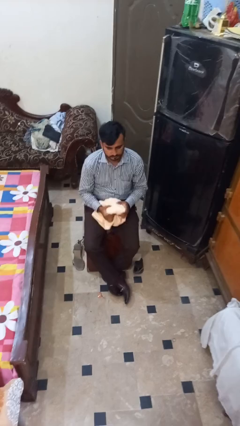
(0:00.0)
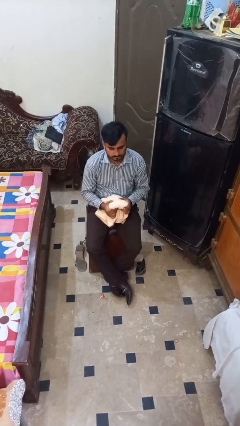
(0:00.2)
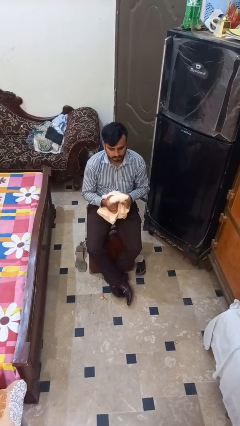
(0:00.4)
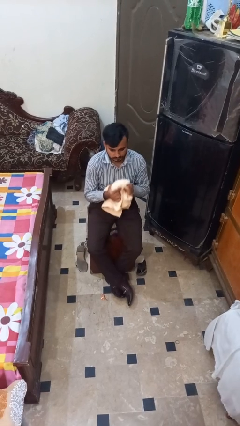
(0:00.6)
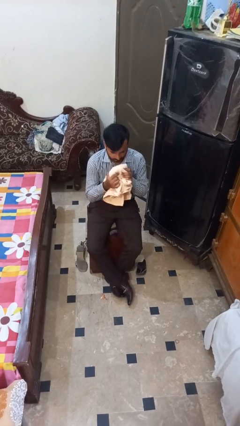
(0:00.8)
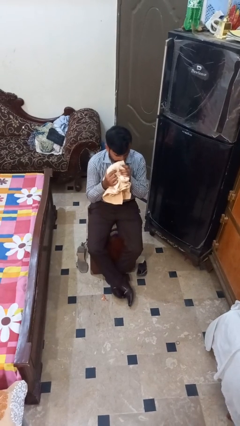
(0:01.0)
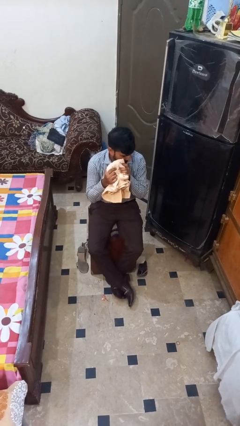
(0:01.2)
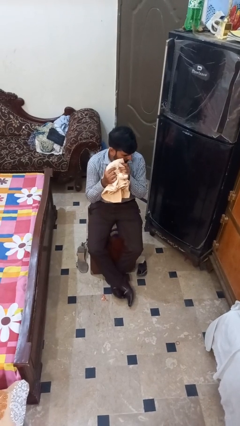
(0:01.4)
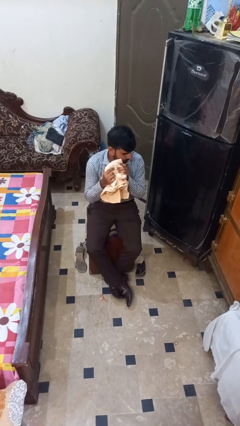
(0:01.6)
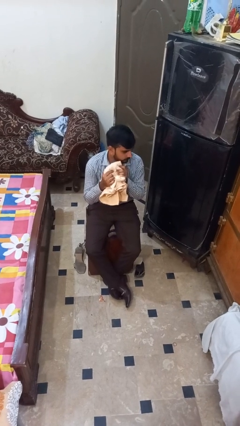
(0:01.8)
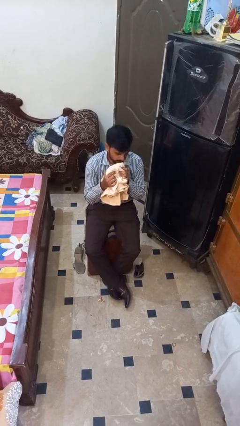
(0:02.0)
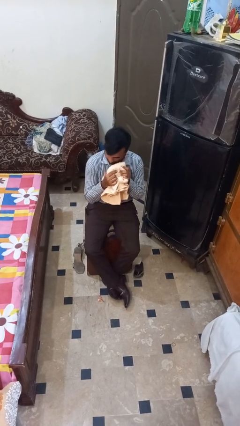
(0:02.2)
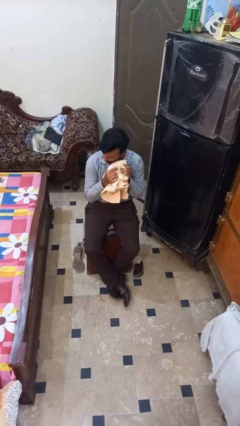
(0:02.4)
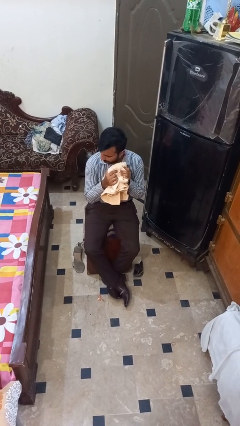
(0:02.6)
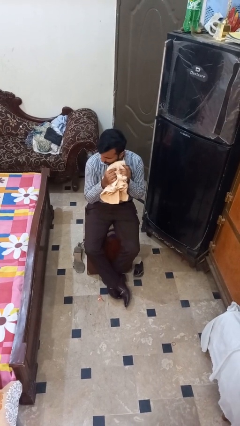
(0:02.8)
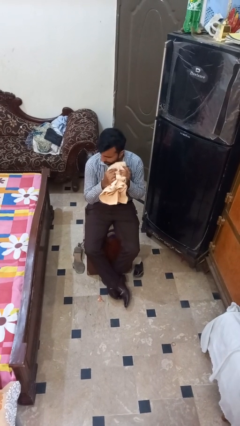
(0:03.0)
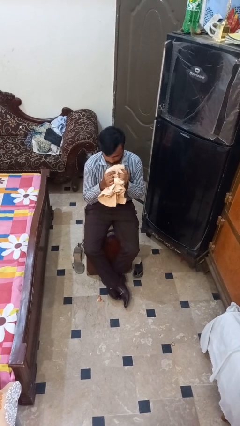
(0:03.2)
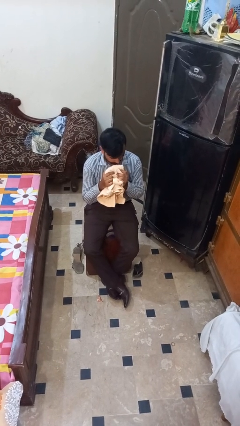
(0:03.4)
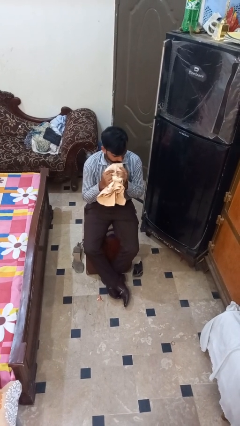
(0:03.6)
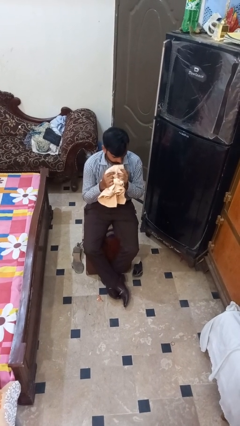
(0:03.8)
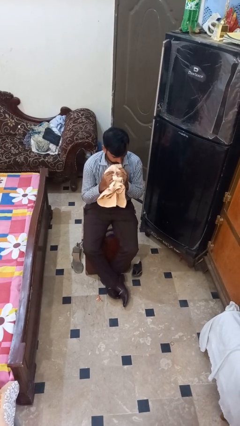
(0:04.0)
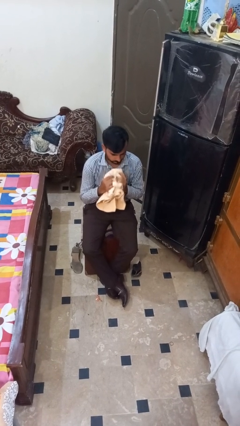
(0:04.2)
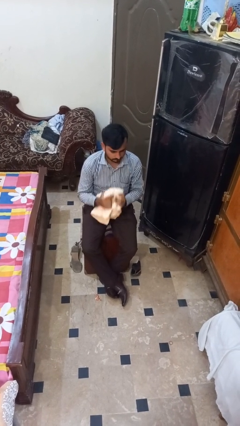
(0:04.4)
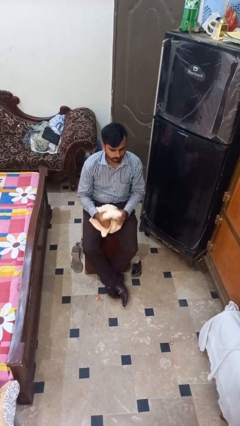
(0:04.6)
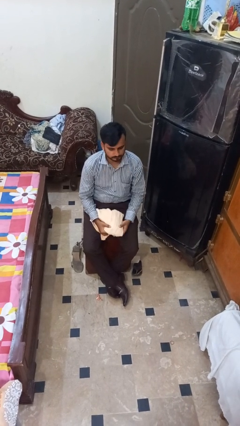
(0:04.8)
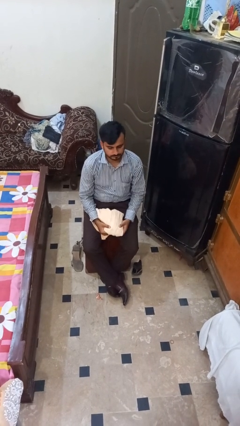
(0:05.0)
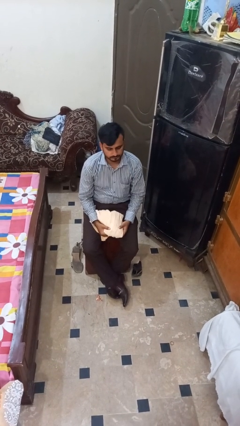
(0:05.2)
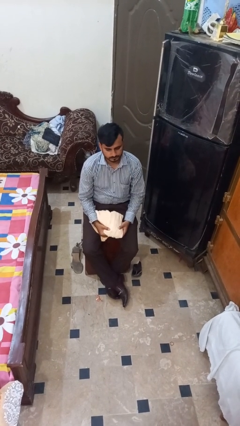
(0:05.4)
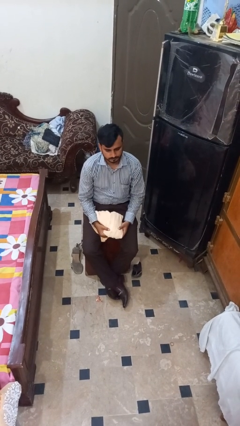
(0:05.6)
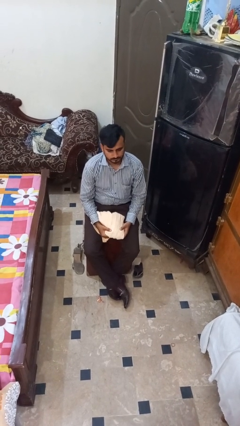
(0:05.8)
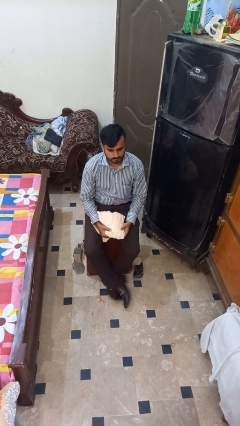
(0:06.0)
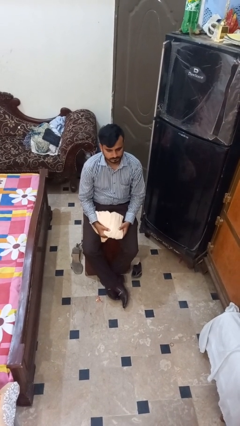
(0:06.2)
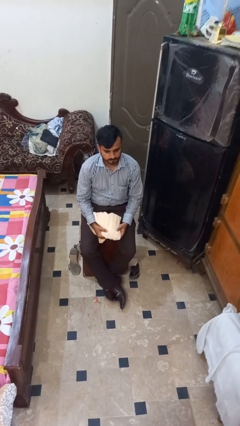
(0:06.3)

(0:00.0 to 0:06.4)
person wipes mouth with napkin

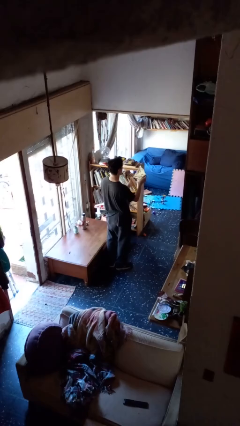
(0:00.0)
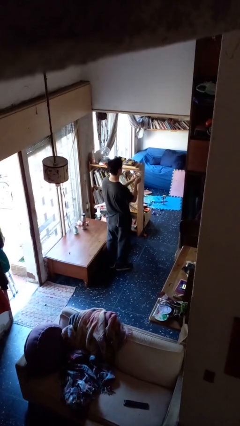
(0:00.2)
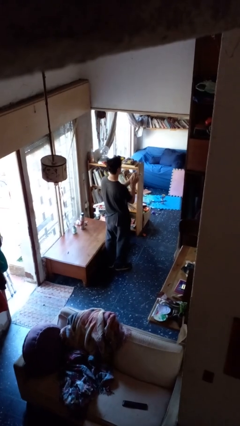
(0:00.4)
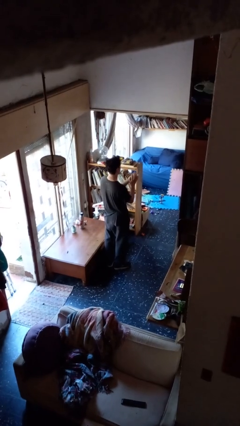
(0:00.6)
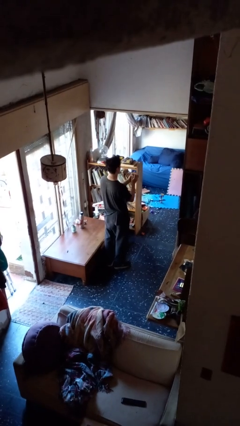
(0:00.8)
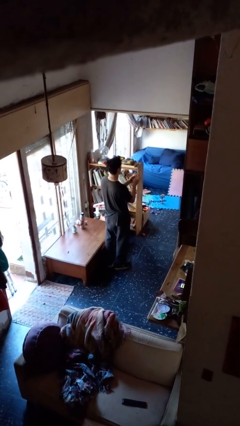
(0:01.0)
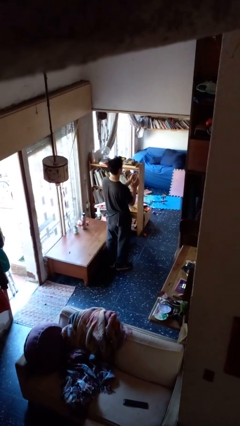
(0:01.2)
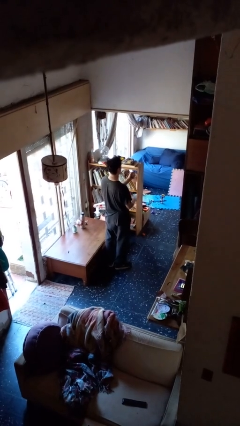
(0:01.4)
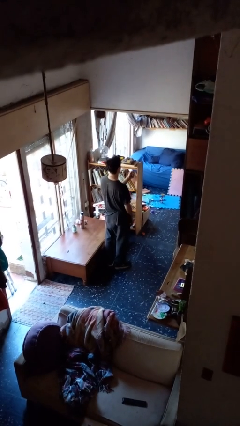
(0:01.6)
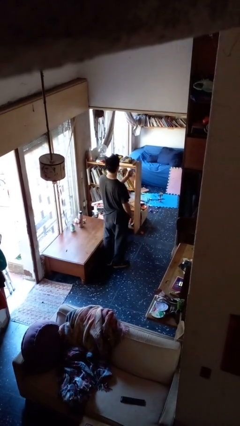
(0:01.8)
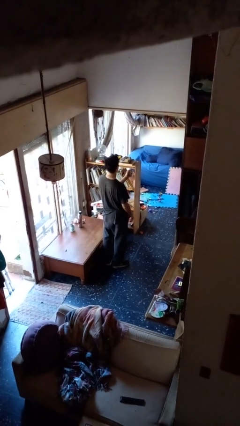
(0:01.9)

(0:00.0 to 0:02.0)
person crumples paper

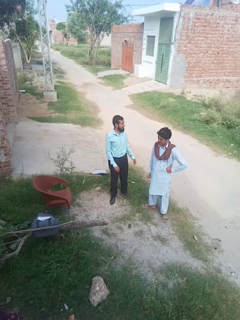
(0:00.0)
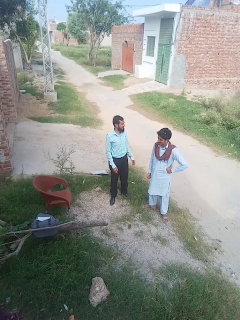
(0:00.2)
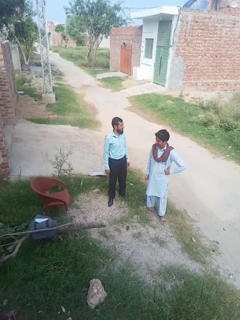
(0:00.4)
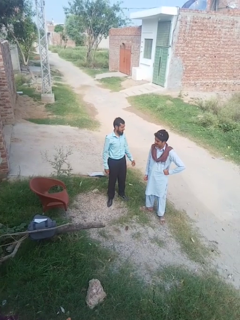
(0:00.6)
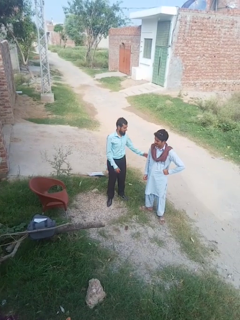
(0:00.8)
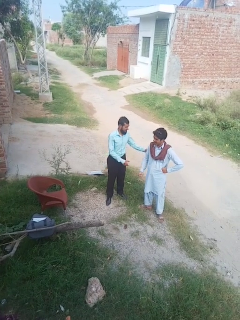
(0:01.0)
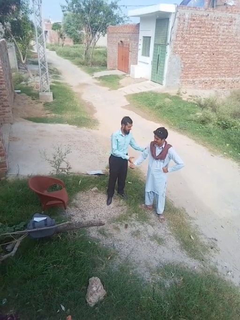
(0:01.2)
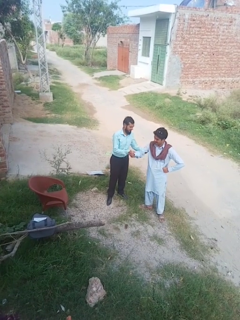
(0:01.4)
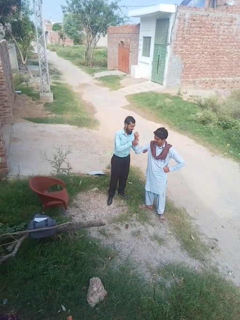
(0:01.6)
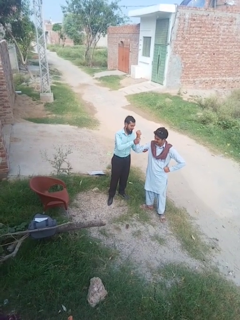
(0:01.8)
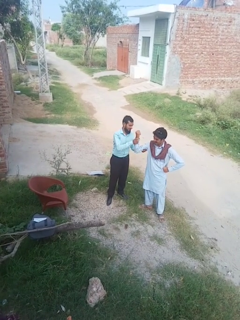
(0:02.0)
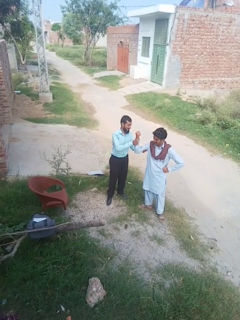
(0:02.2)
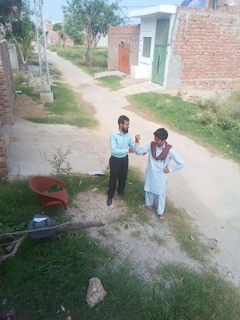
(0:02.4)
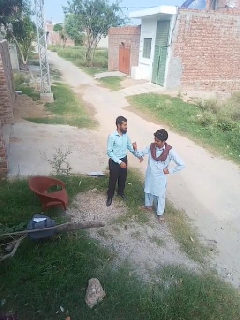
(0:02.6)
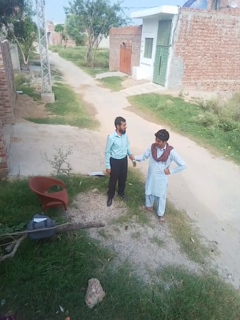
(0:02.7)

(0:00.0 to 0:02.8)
person grabs person by bicep

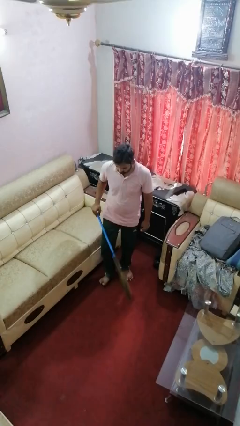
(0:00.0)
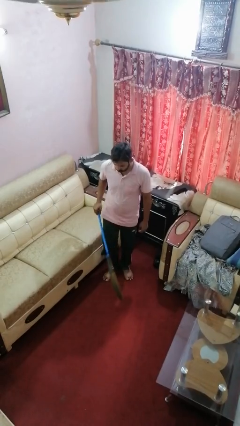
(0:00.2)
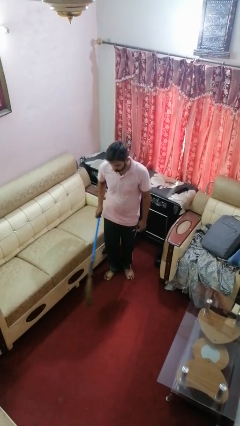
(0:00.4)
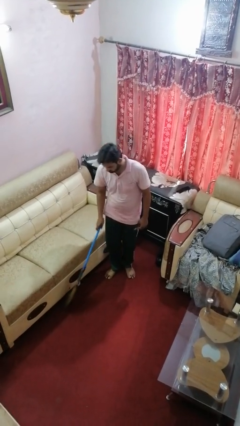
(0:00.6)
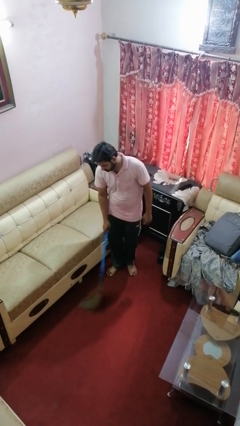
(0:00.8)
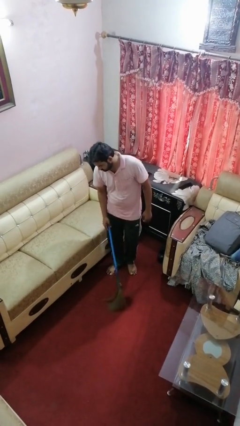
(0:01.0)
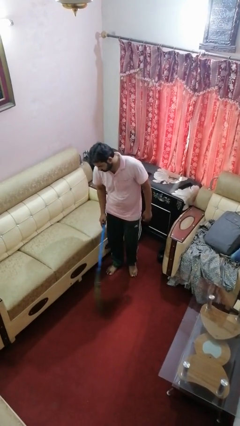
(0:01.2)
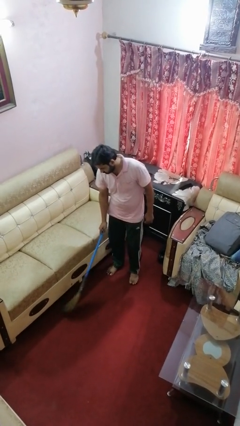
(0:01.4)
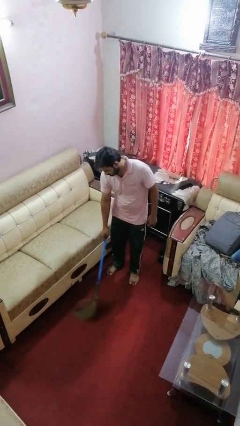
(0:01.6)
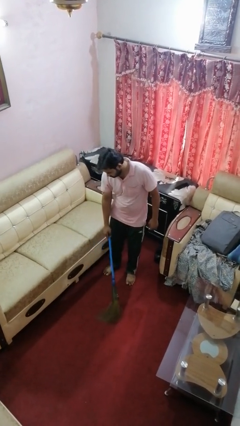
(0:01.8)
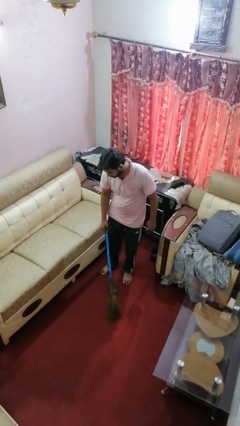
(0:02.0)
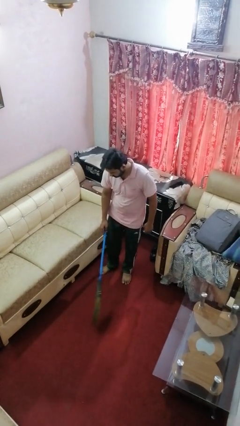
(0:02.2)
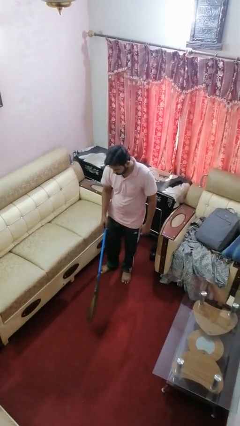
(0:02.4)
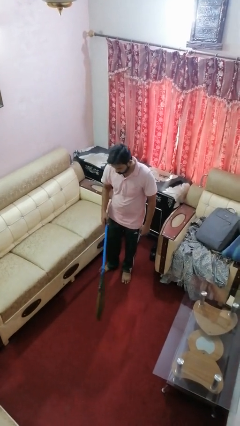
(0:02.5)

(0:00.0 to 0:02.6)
person sweeps floor

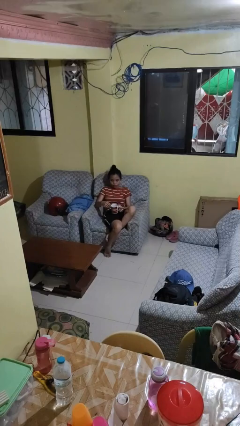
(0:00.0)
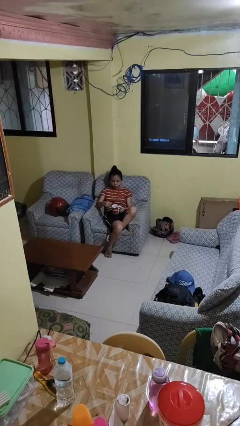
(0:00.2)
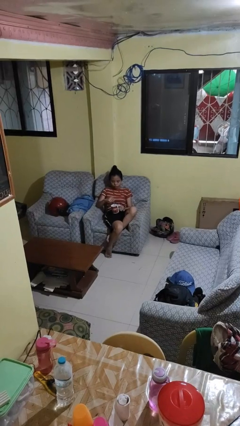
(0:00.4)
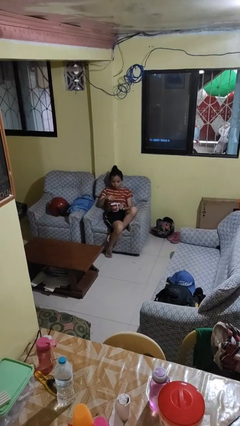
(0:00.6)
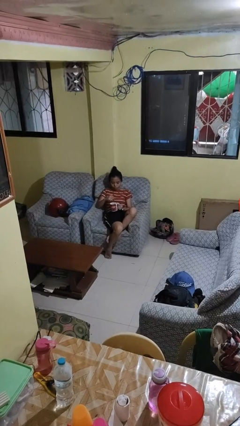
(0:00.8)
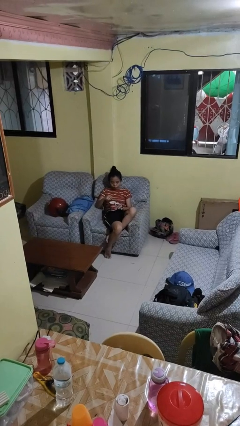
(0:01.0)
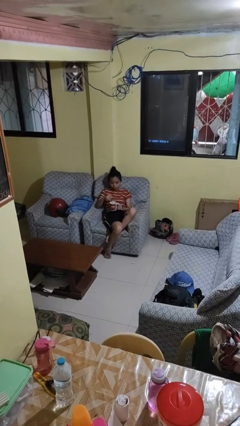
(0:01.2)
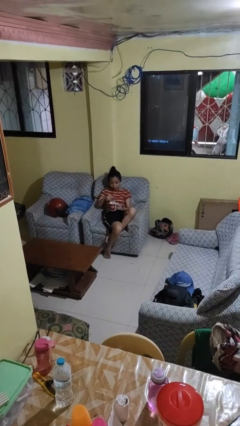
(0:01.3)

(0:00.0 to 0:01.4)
person stirs mug

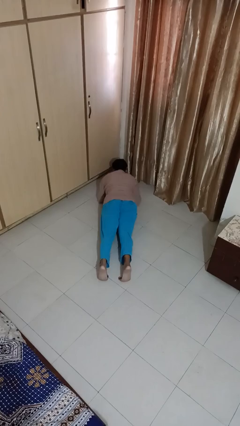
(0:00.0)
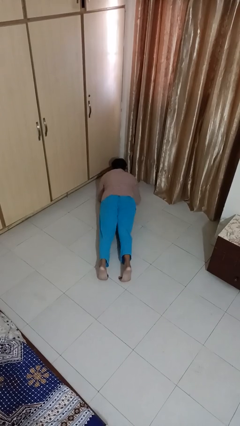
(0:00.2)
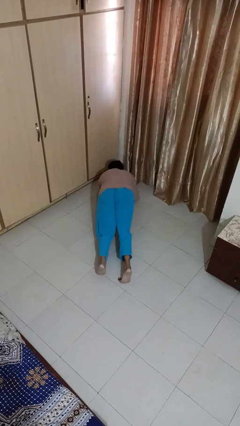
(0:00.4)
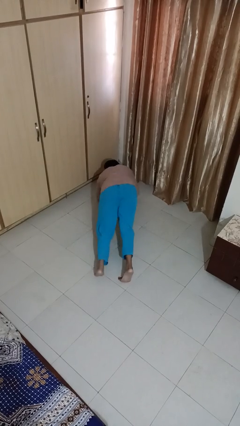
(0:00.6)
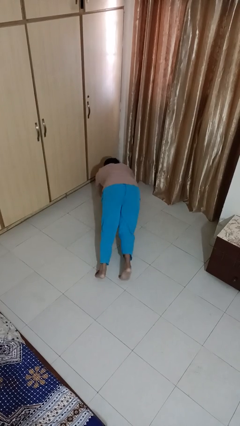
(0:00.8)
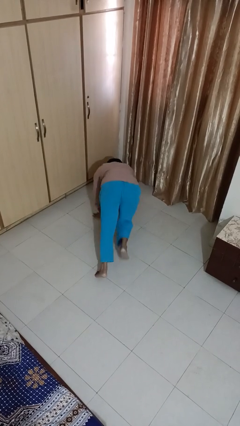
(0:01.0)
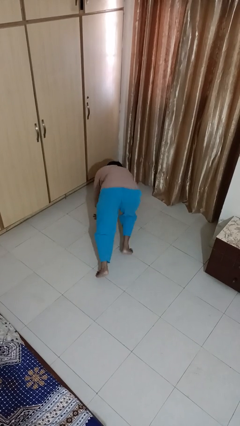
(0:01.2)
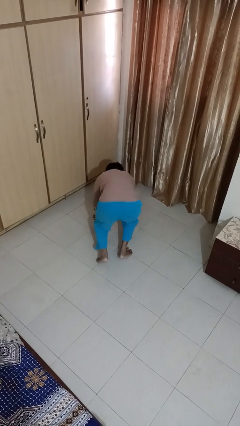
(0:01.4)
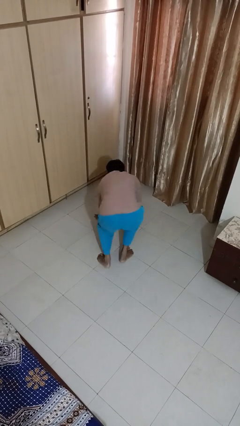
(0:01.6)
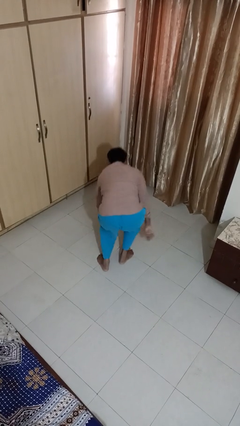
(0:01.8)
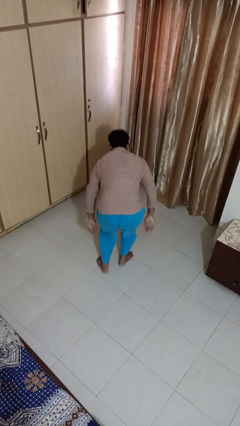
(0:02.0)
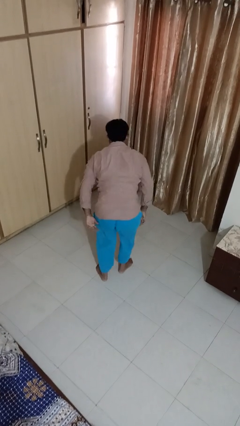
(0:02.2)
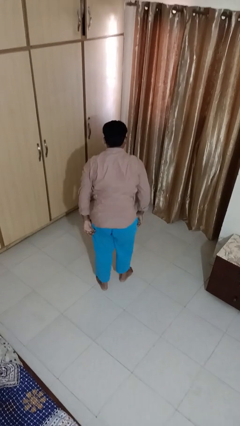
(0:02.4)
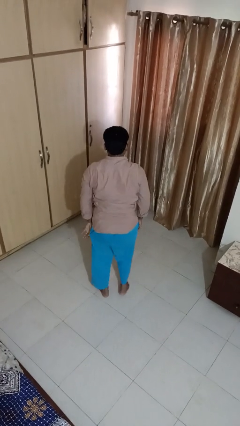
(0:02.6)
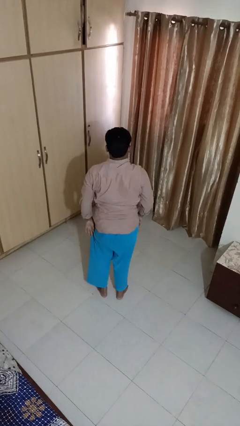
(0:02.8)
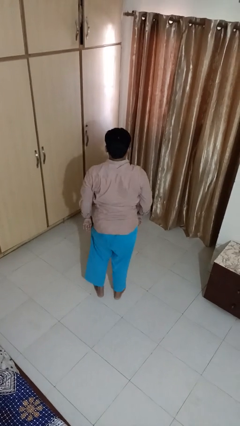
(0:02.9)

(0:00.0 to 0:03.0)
person stands up from floor

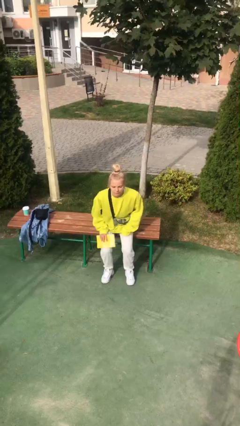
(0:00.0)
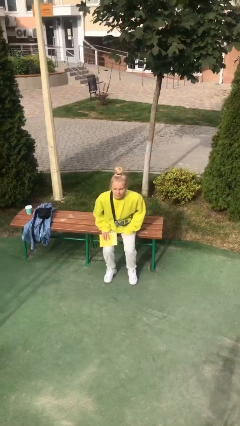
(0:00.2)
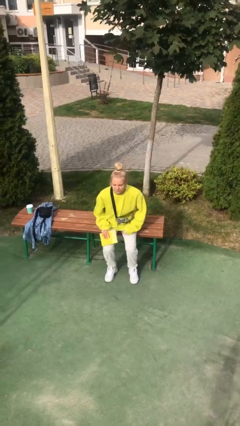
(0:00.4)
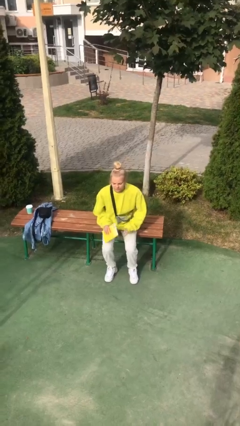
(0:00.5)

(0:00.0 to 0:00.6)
person sits down
